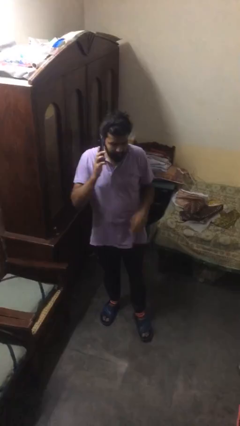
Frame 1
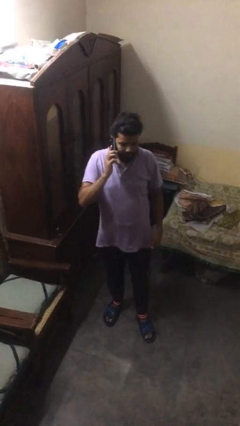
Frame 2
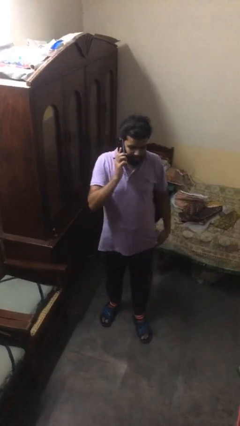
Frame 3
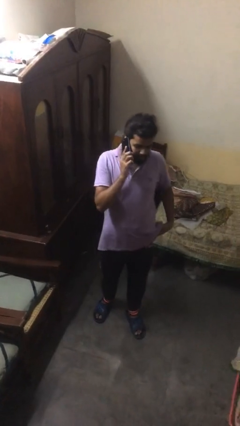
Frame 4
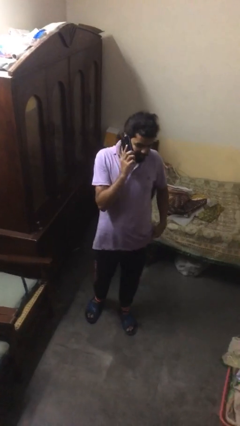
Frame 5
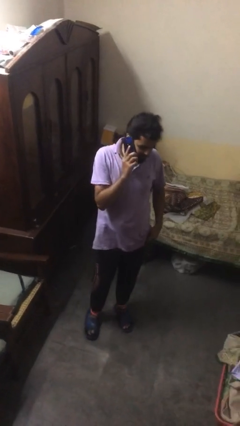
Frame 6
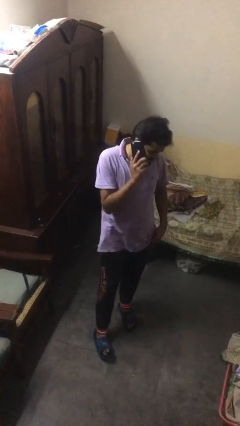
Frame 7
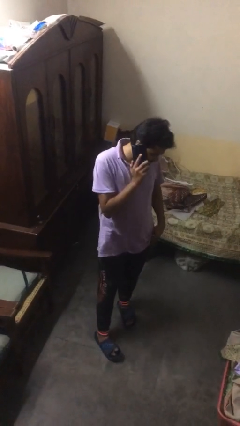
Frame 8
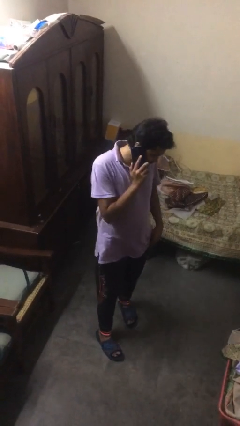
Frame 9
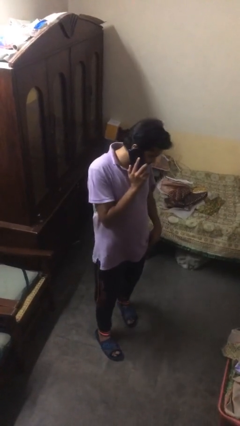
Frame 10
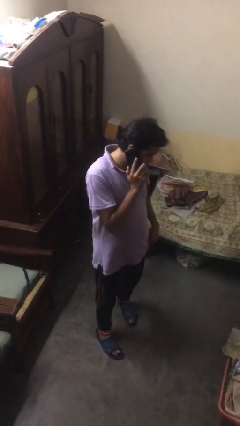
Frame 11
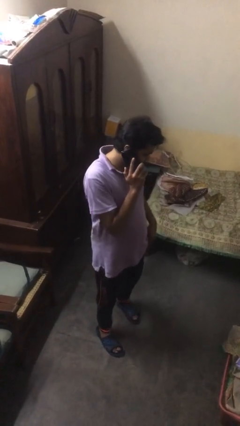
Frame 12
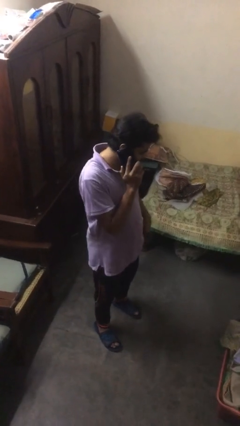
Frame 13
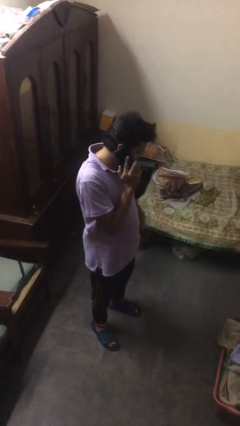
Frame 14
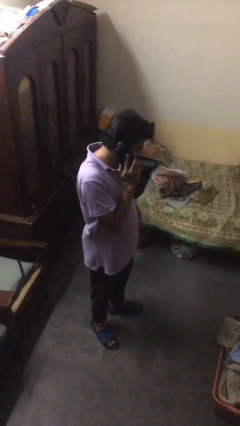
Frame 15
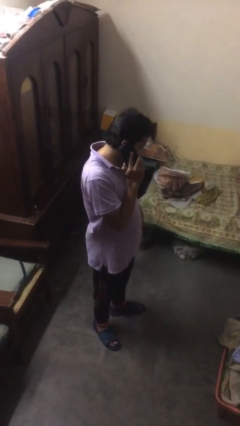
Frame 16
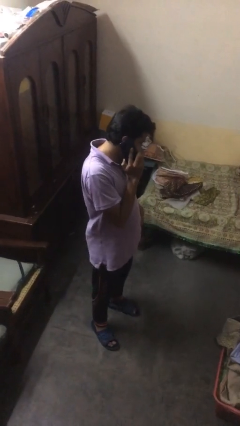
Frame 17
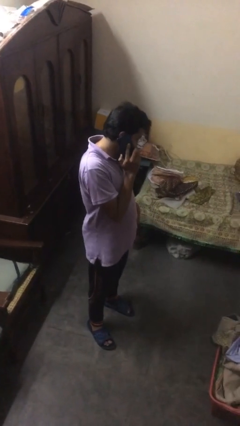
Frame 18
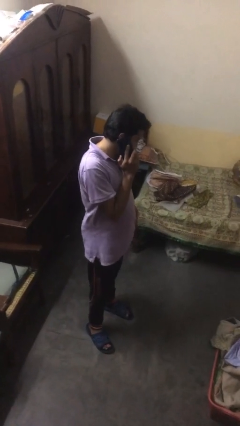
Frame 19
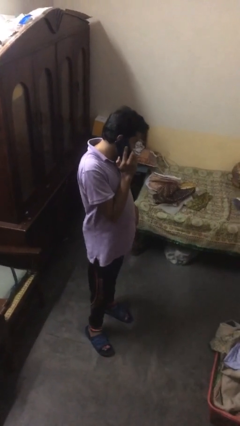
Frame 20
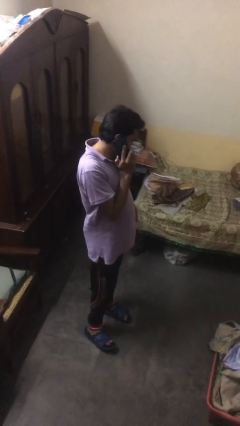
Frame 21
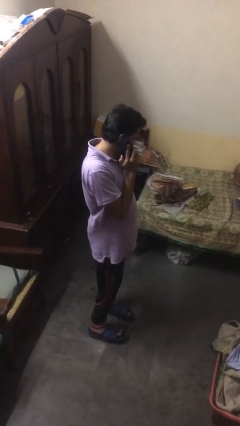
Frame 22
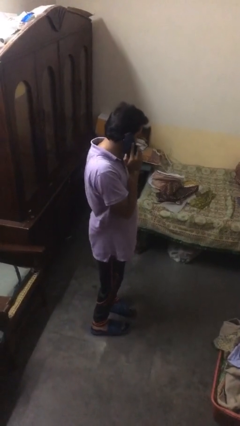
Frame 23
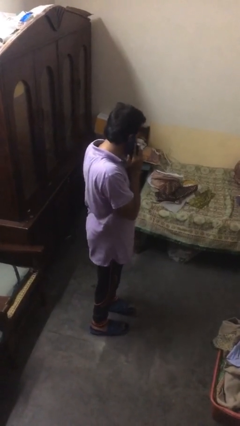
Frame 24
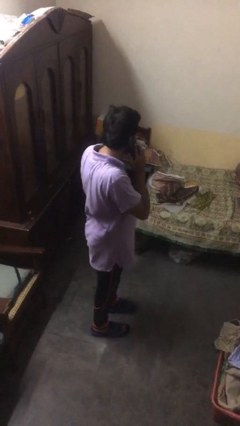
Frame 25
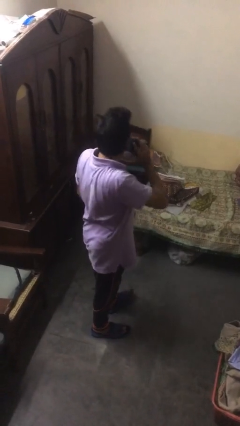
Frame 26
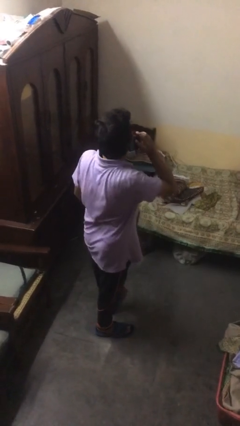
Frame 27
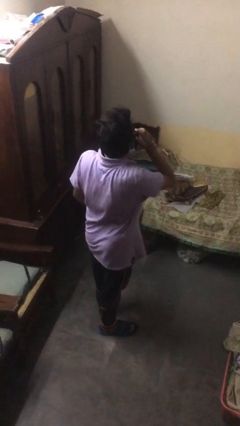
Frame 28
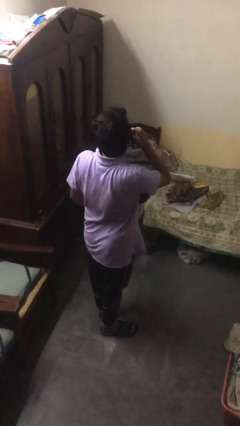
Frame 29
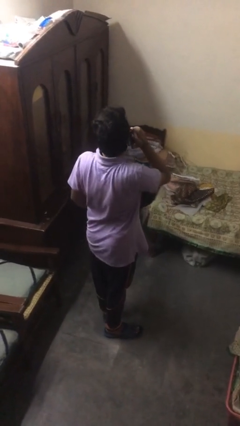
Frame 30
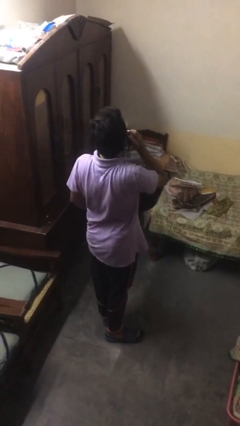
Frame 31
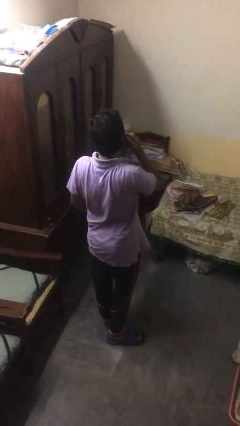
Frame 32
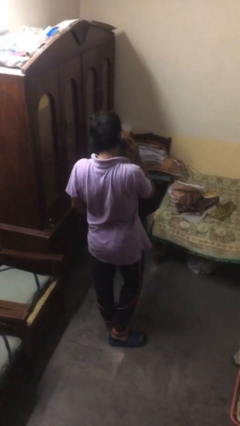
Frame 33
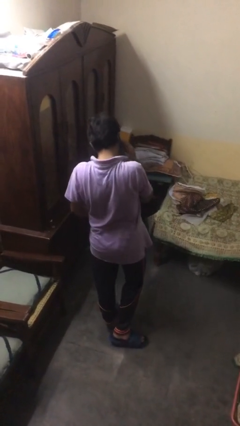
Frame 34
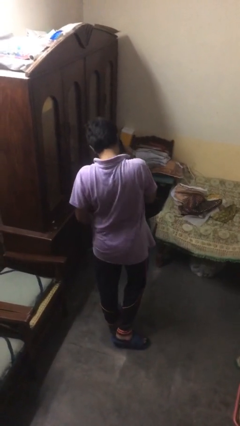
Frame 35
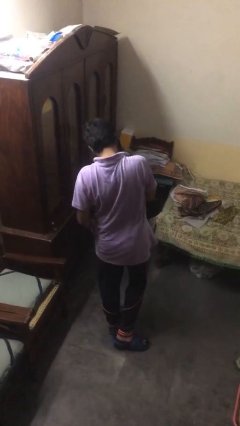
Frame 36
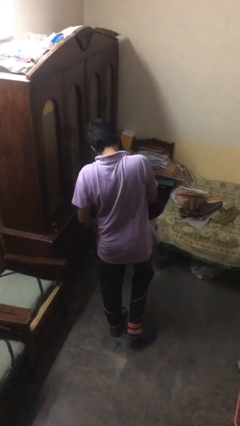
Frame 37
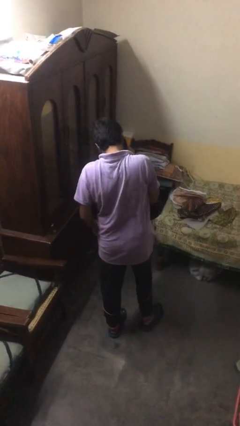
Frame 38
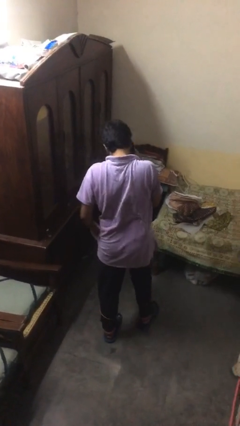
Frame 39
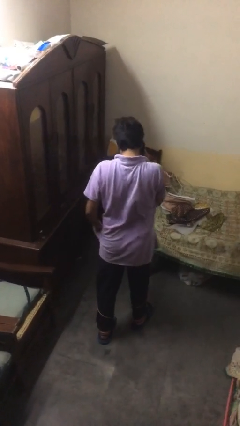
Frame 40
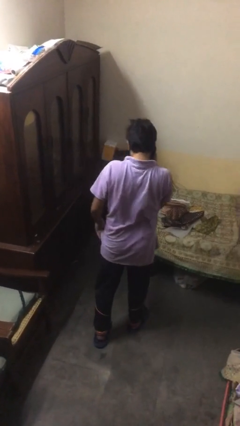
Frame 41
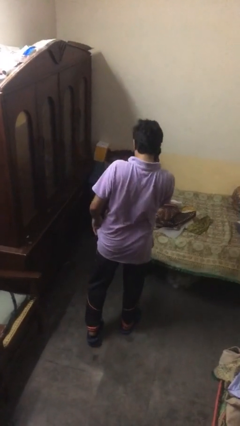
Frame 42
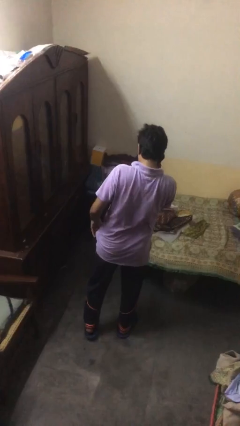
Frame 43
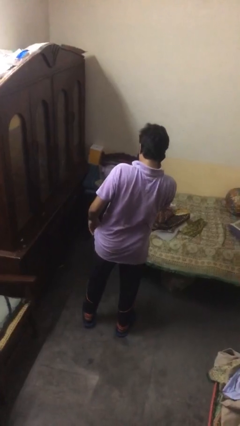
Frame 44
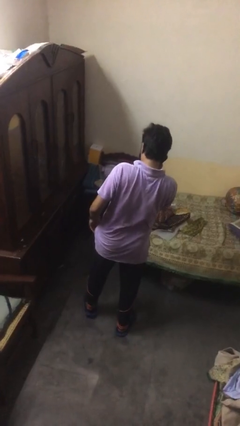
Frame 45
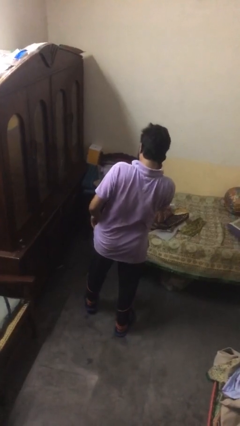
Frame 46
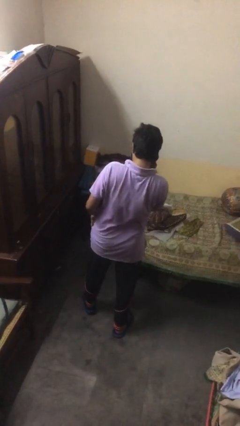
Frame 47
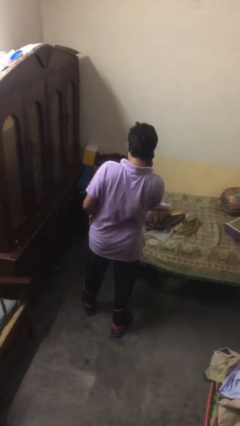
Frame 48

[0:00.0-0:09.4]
person talks on phone

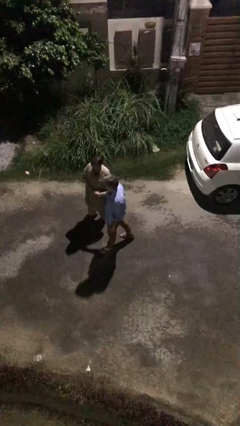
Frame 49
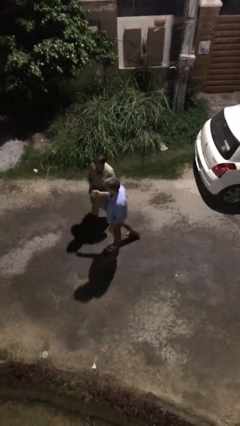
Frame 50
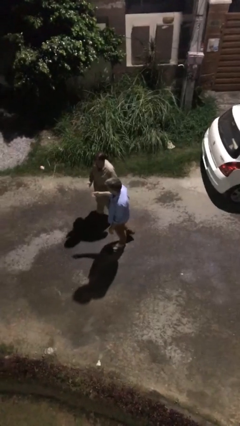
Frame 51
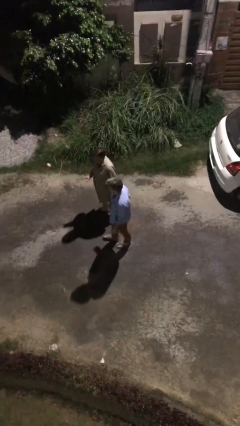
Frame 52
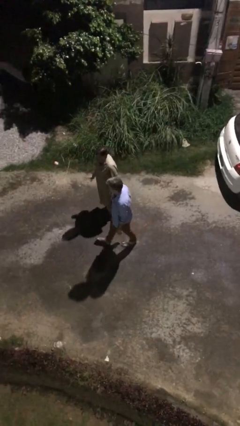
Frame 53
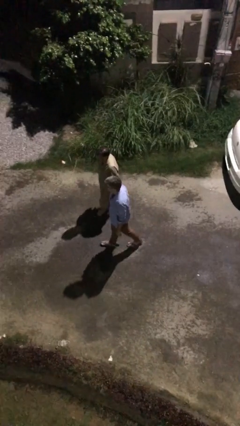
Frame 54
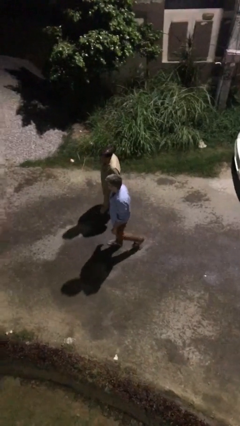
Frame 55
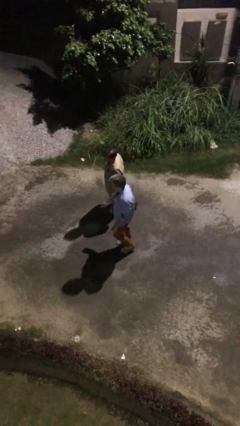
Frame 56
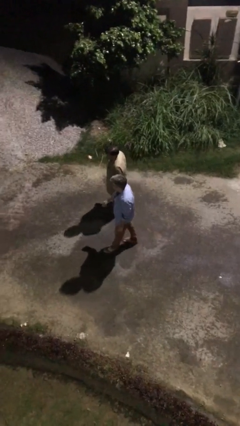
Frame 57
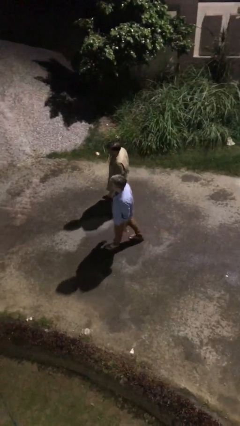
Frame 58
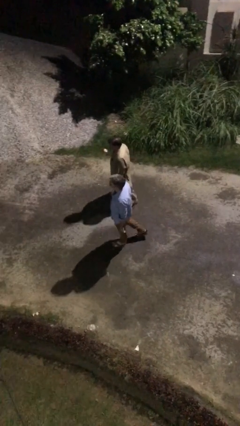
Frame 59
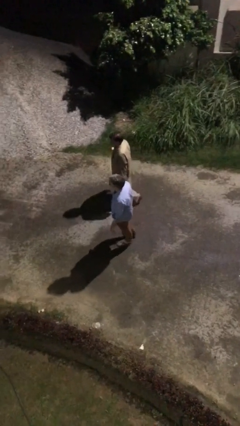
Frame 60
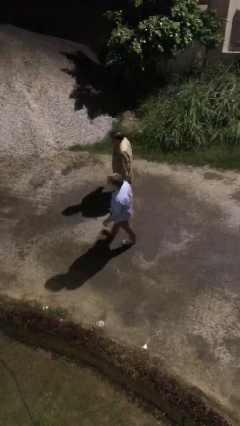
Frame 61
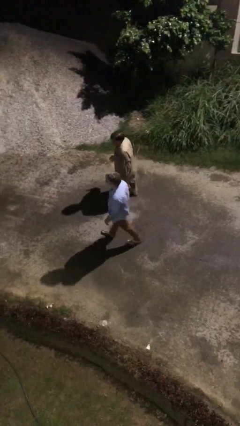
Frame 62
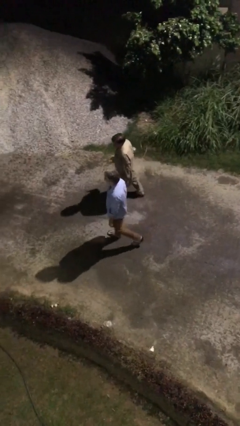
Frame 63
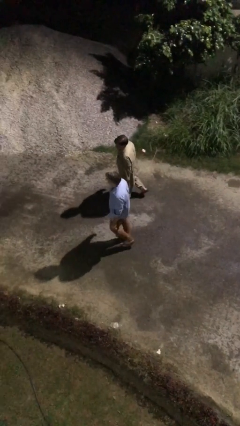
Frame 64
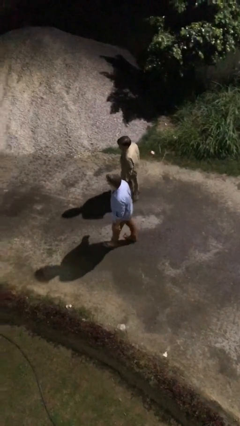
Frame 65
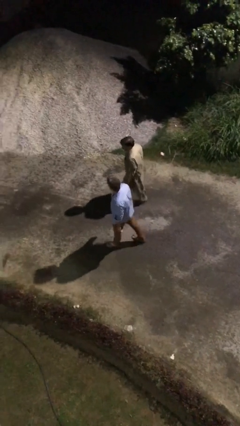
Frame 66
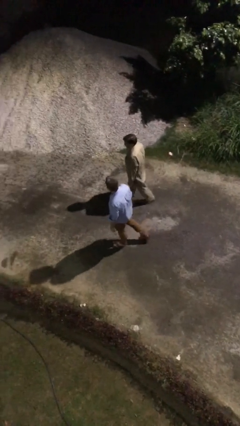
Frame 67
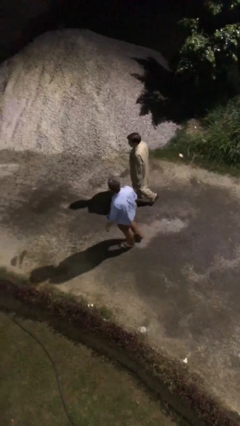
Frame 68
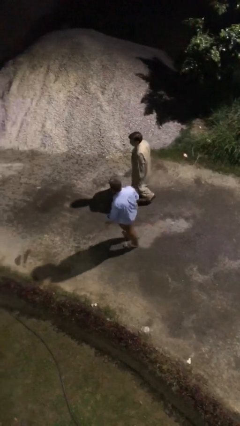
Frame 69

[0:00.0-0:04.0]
person talks to person

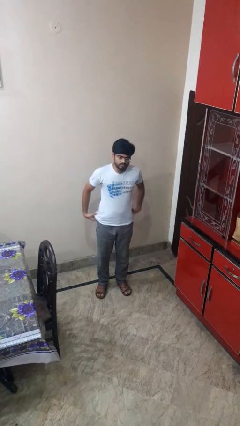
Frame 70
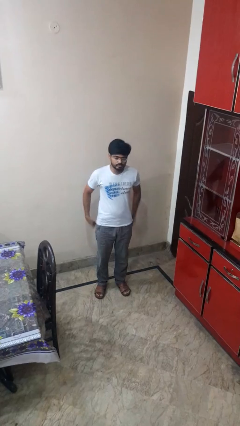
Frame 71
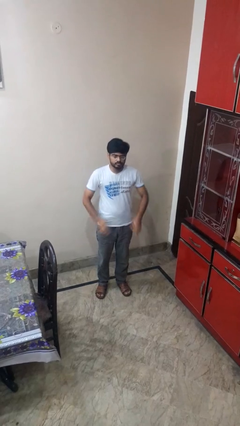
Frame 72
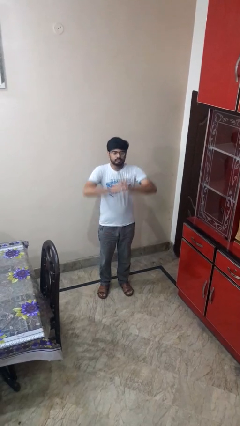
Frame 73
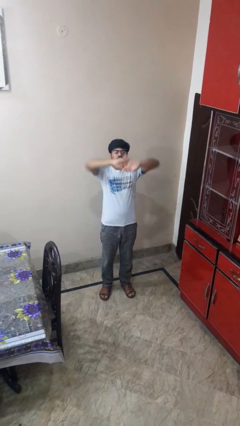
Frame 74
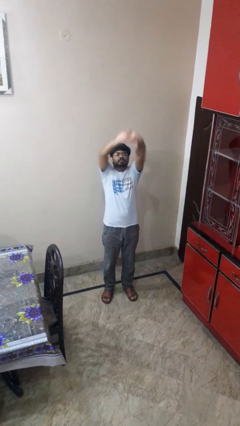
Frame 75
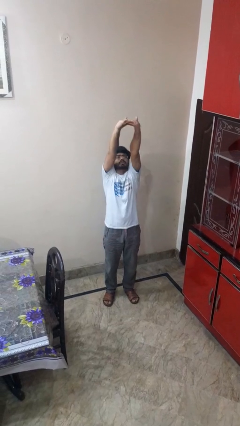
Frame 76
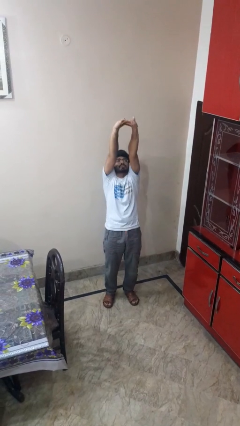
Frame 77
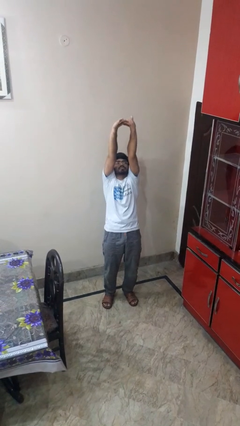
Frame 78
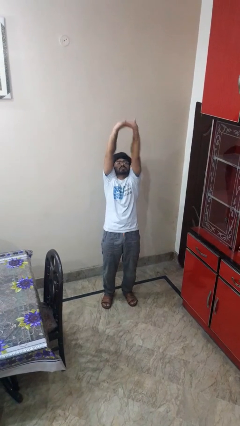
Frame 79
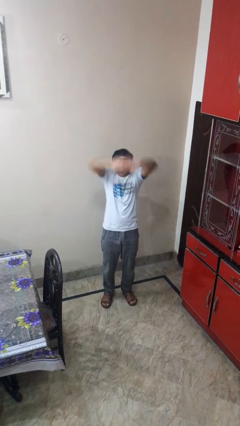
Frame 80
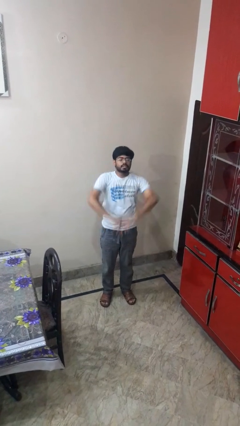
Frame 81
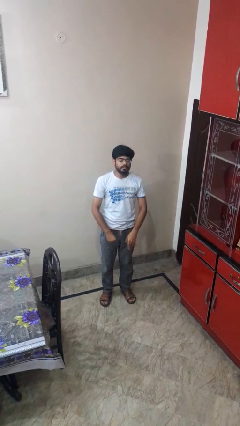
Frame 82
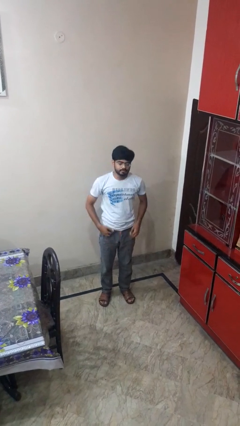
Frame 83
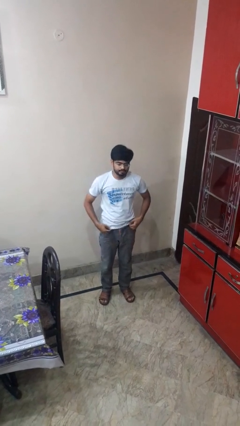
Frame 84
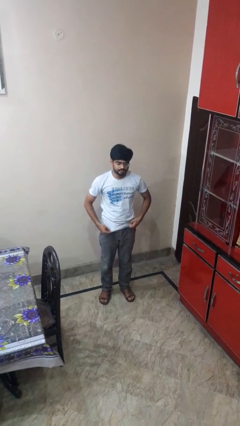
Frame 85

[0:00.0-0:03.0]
person stretches arms over head

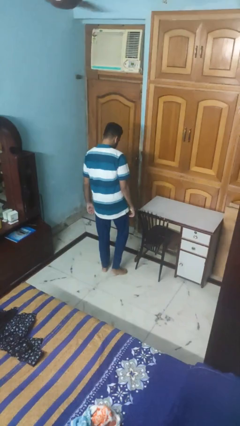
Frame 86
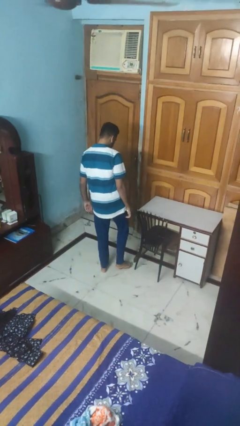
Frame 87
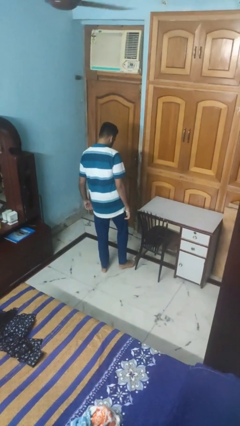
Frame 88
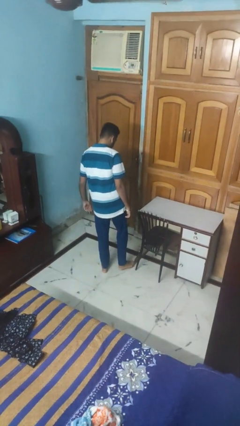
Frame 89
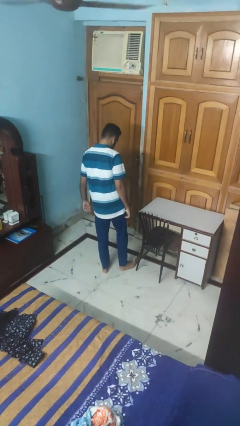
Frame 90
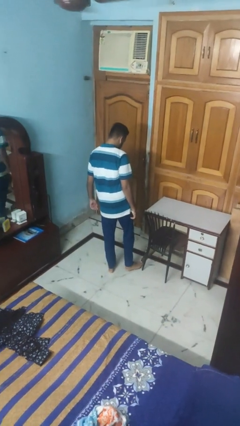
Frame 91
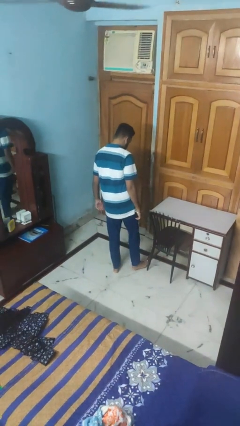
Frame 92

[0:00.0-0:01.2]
person stubs toe
